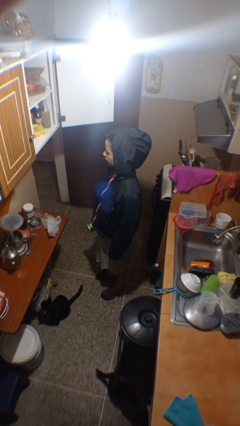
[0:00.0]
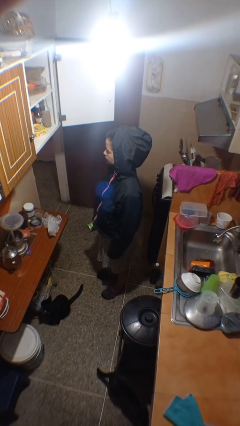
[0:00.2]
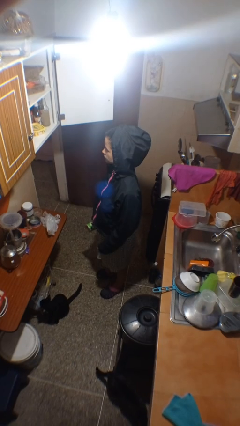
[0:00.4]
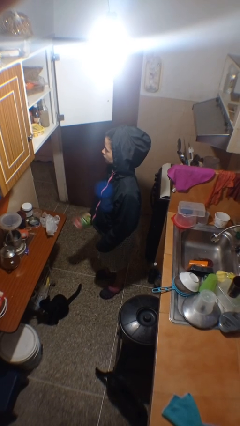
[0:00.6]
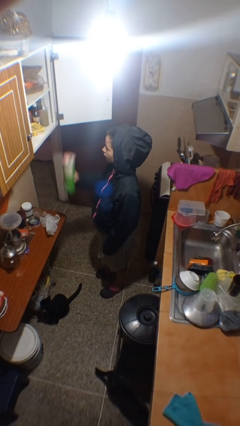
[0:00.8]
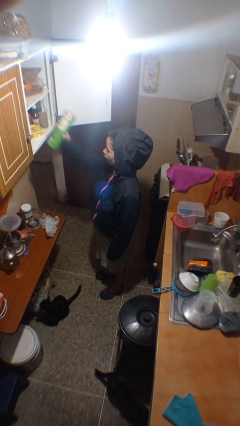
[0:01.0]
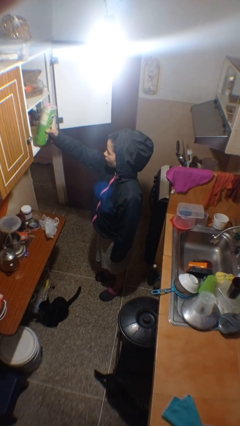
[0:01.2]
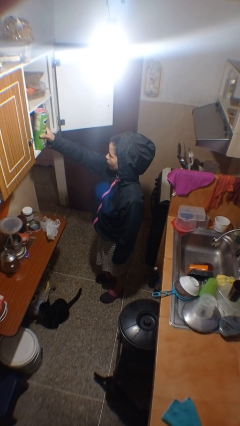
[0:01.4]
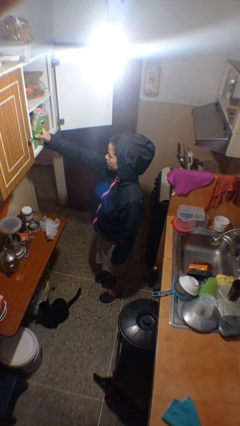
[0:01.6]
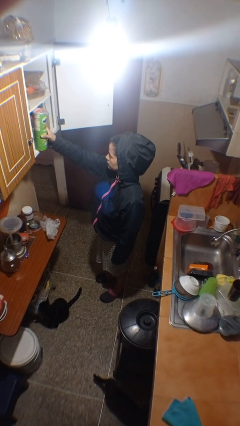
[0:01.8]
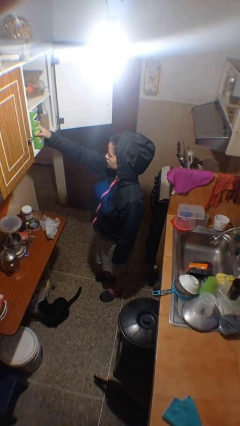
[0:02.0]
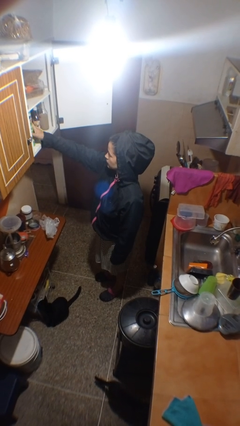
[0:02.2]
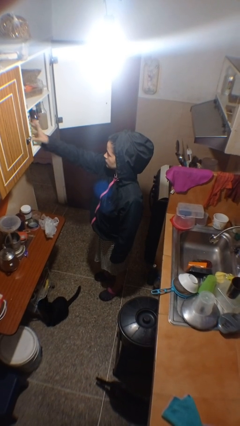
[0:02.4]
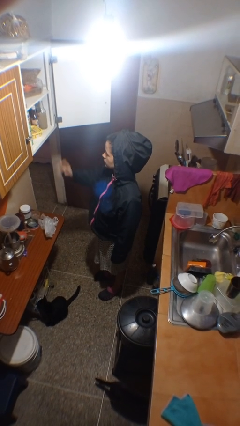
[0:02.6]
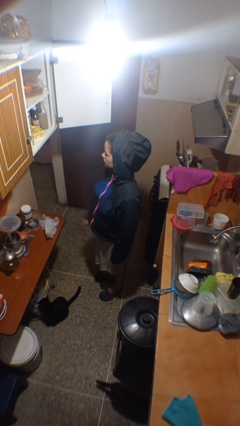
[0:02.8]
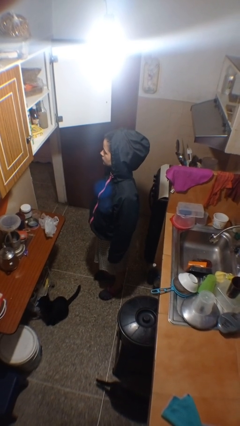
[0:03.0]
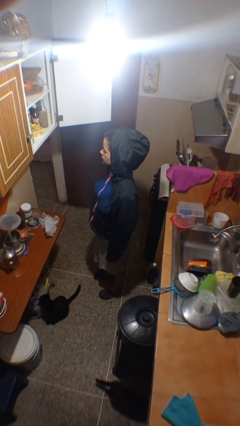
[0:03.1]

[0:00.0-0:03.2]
person puts object in cabinet

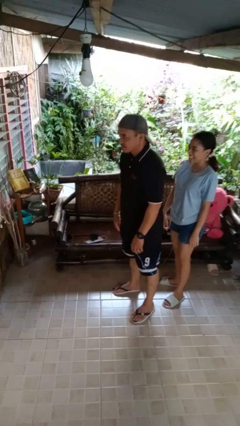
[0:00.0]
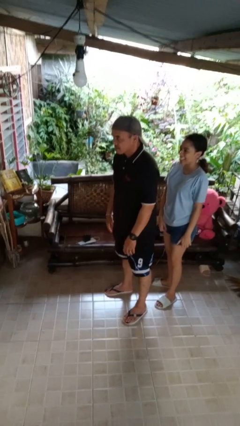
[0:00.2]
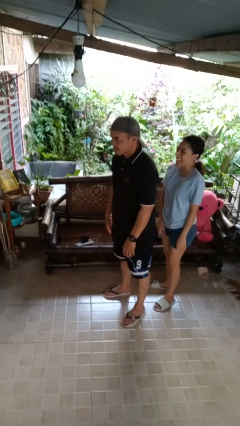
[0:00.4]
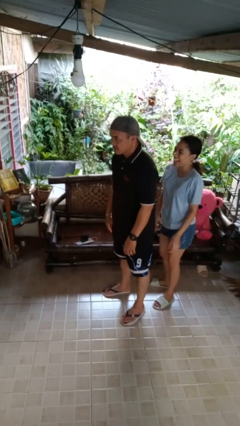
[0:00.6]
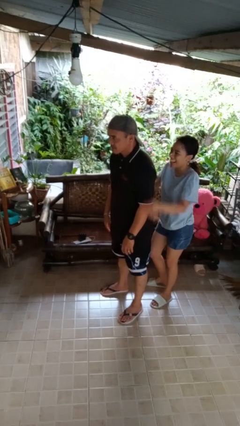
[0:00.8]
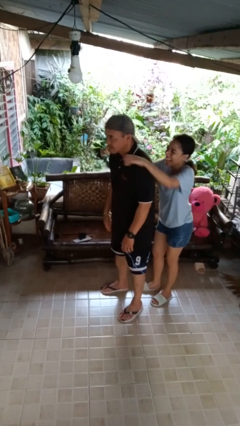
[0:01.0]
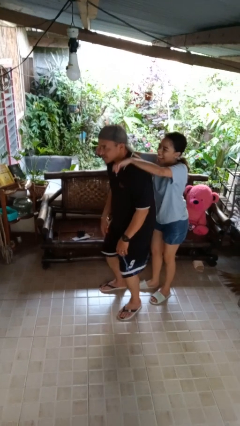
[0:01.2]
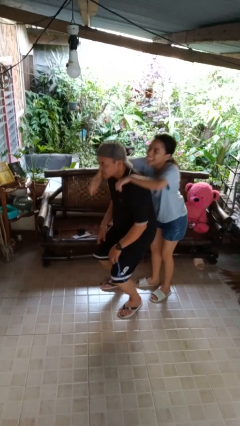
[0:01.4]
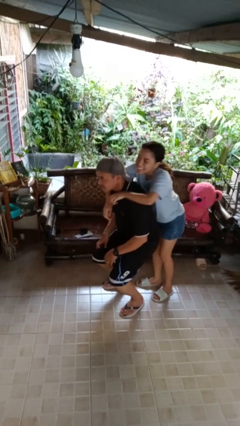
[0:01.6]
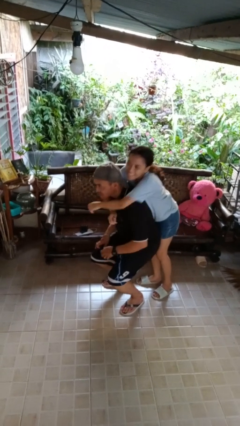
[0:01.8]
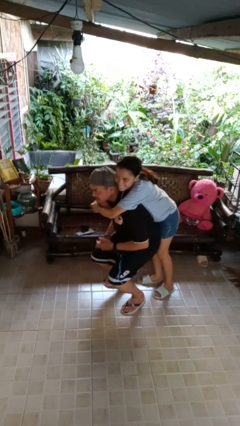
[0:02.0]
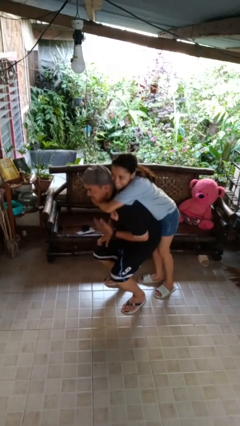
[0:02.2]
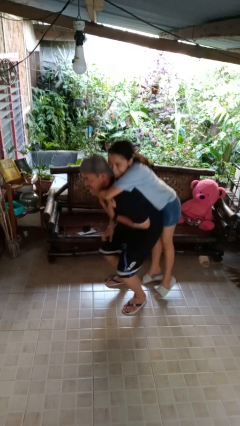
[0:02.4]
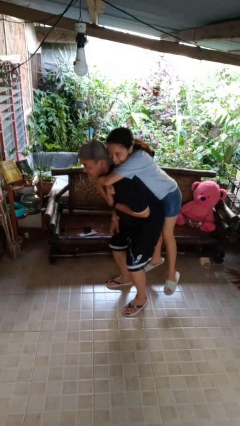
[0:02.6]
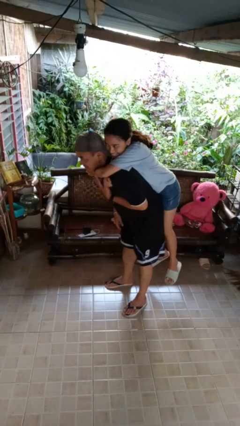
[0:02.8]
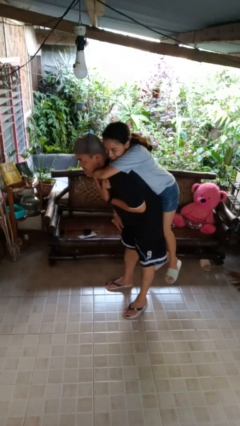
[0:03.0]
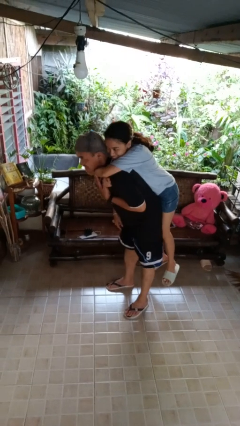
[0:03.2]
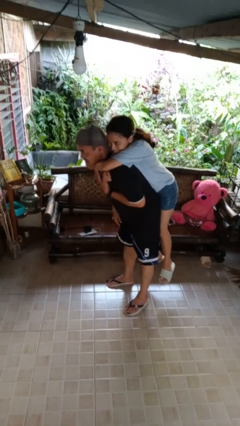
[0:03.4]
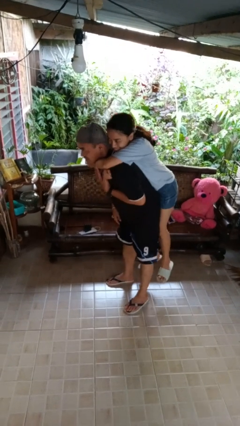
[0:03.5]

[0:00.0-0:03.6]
person picks up person

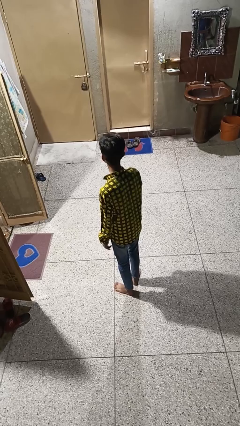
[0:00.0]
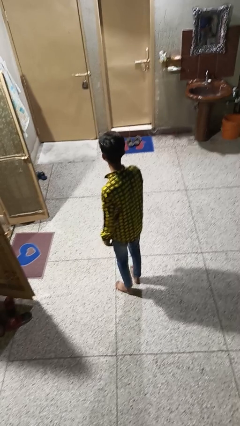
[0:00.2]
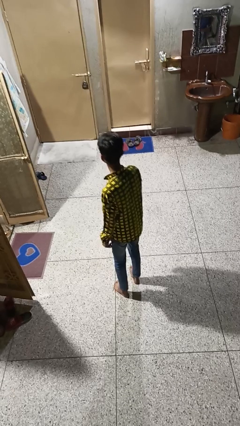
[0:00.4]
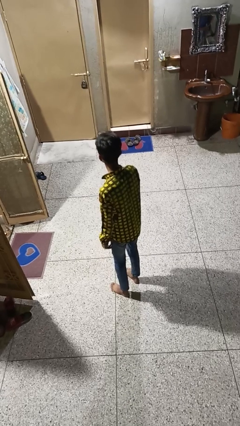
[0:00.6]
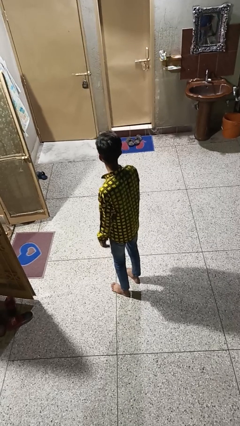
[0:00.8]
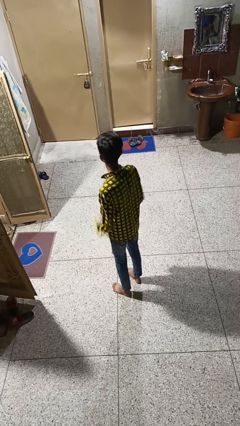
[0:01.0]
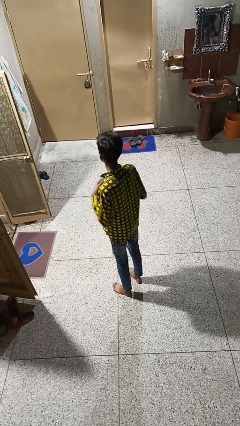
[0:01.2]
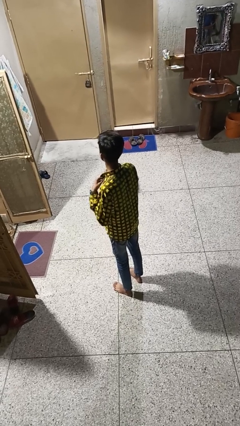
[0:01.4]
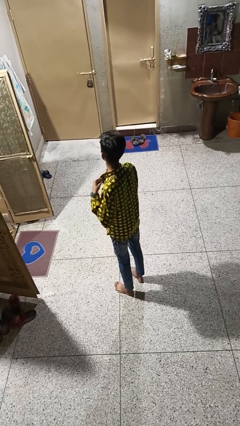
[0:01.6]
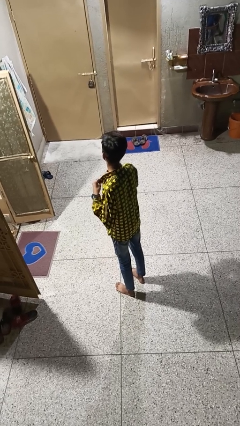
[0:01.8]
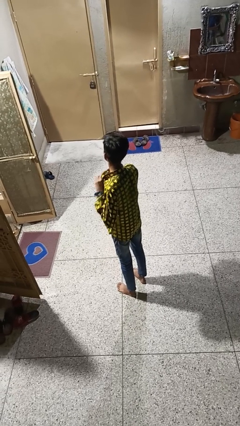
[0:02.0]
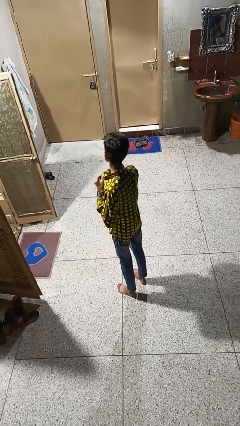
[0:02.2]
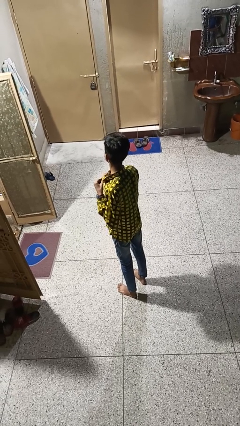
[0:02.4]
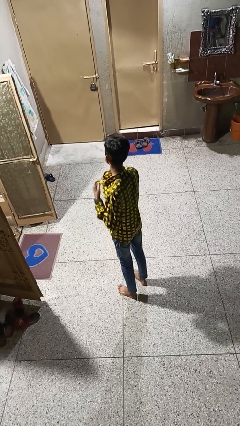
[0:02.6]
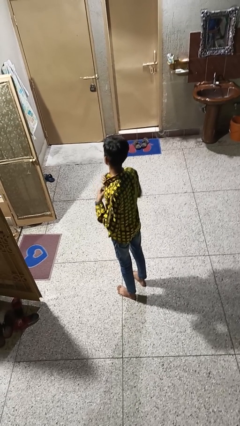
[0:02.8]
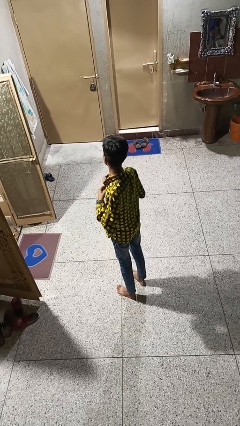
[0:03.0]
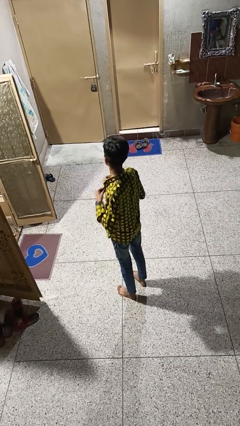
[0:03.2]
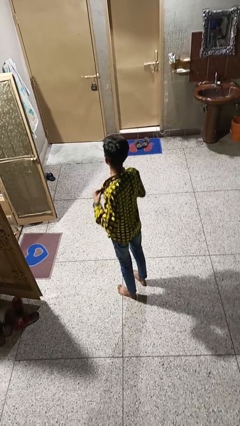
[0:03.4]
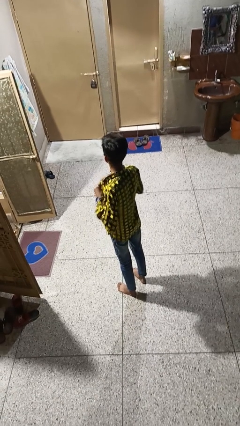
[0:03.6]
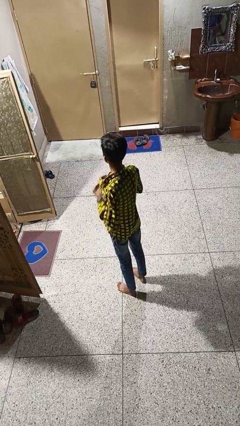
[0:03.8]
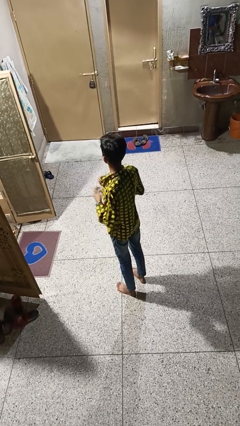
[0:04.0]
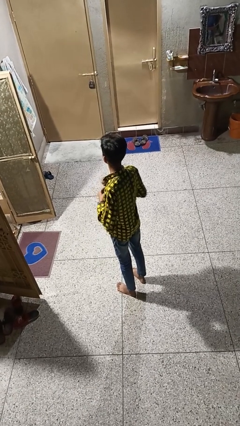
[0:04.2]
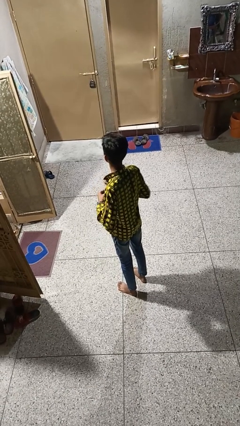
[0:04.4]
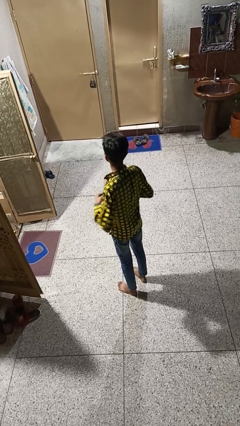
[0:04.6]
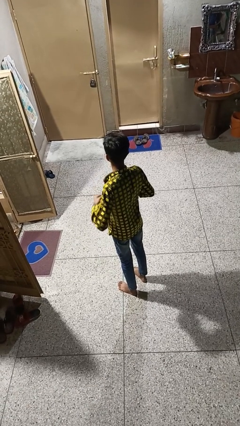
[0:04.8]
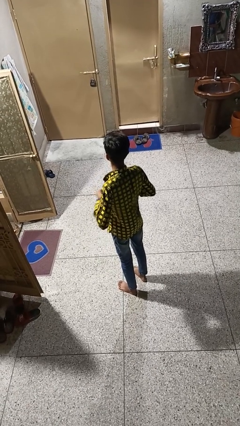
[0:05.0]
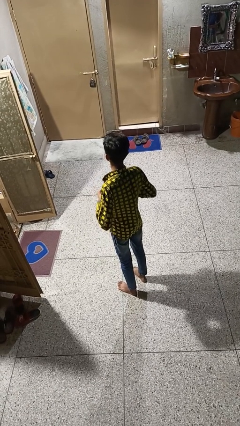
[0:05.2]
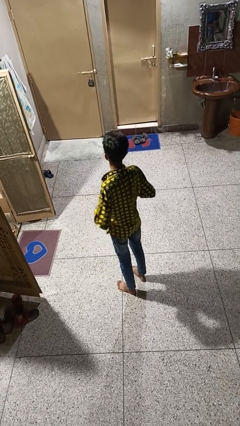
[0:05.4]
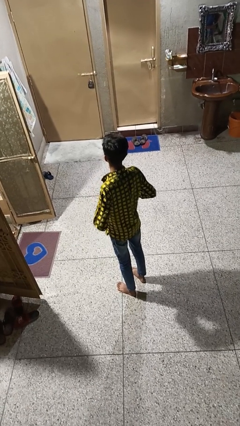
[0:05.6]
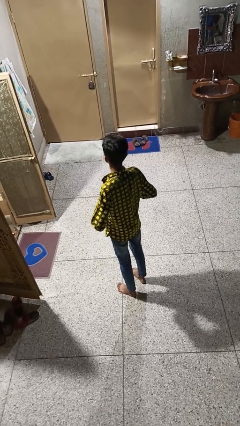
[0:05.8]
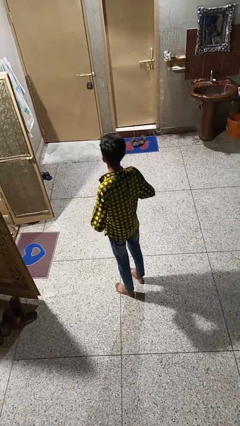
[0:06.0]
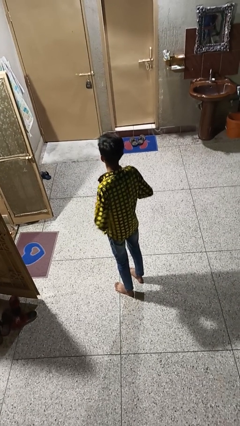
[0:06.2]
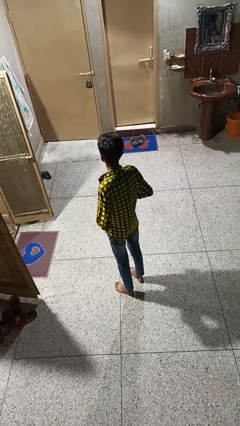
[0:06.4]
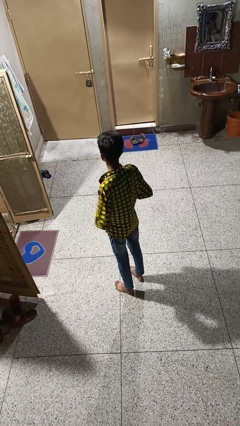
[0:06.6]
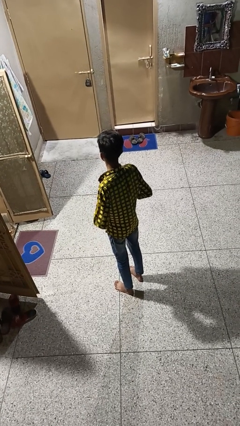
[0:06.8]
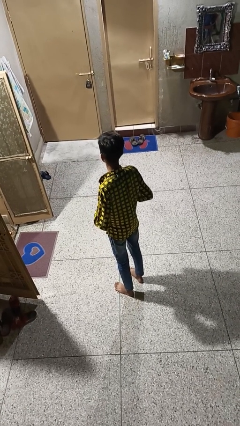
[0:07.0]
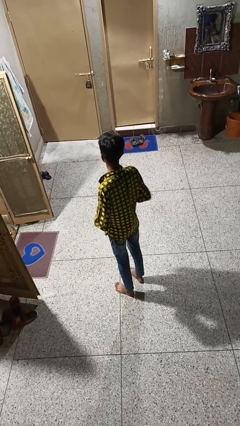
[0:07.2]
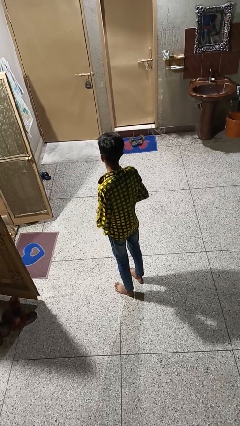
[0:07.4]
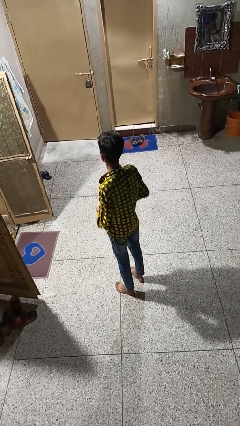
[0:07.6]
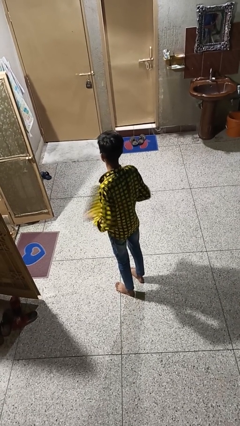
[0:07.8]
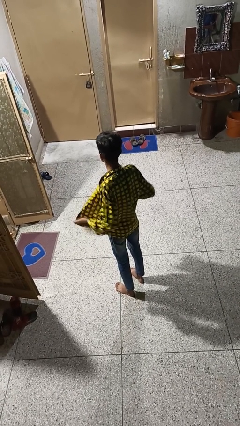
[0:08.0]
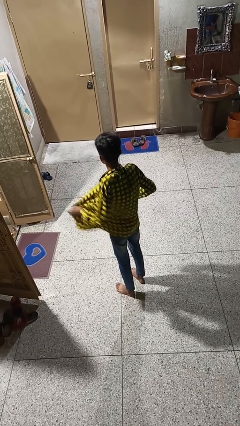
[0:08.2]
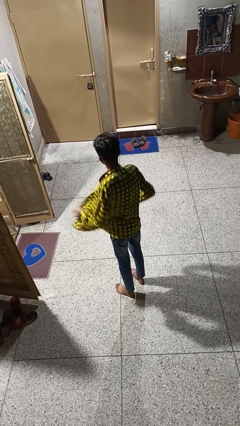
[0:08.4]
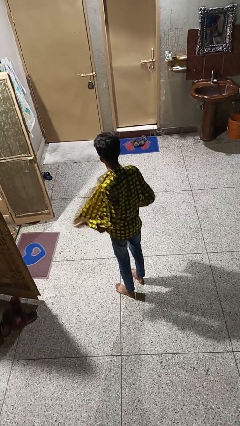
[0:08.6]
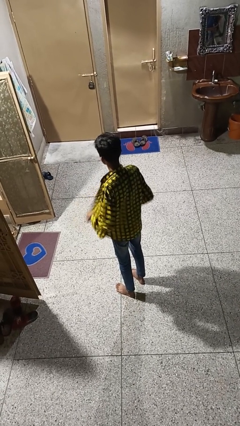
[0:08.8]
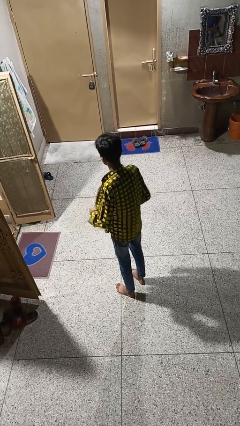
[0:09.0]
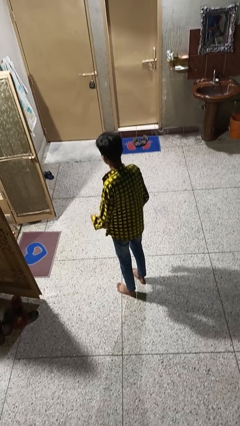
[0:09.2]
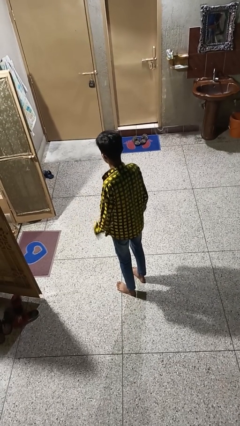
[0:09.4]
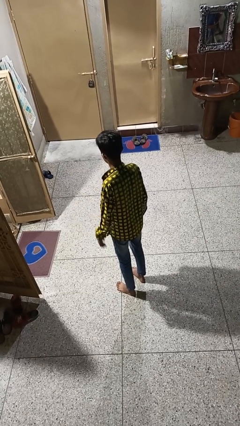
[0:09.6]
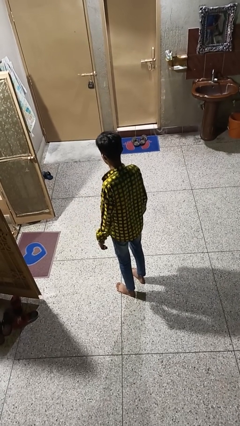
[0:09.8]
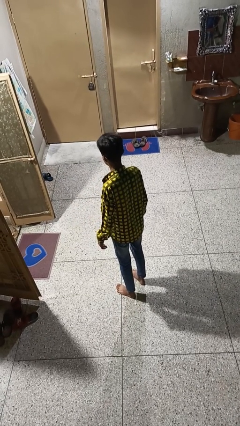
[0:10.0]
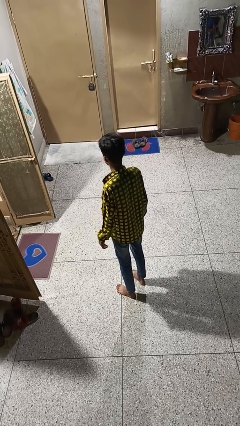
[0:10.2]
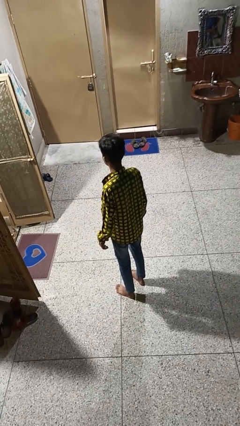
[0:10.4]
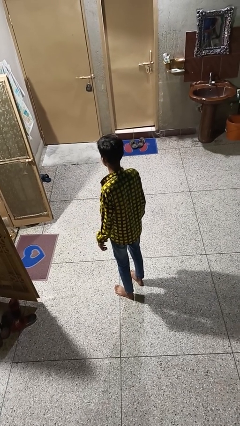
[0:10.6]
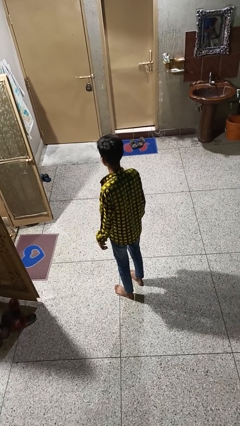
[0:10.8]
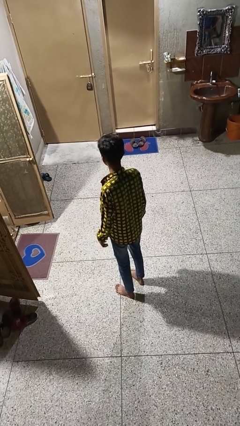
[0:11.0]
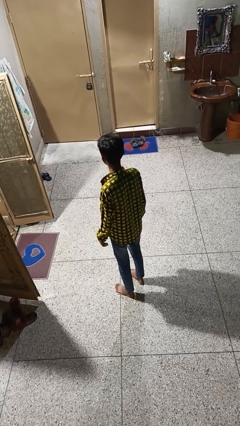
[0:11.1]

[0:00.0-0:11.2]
person unbuttons shirt
